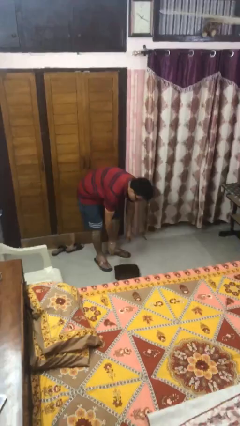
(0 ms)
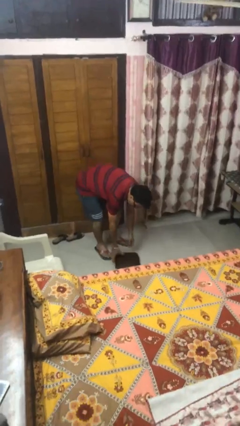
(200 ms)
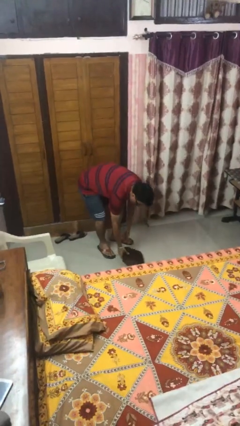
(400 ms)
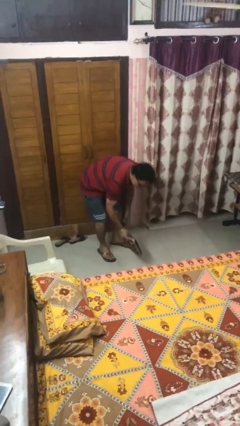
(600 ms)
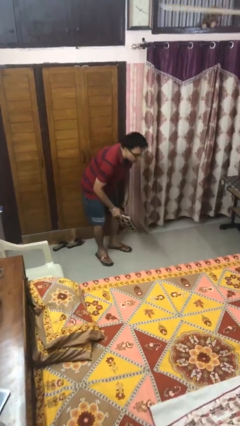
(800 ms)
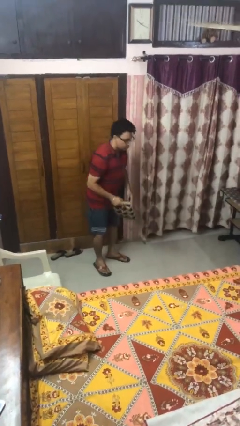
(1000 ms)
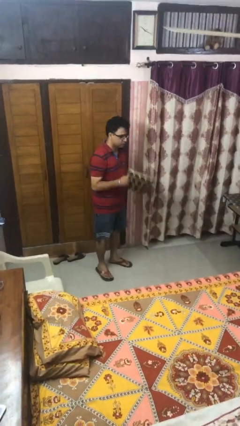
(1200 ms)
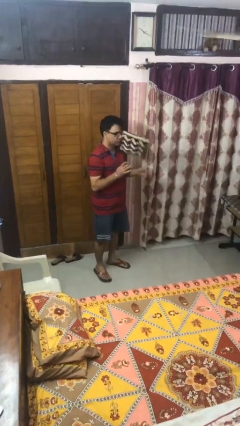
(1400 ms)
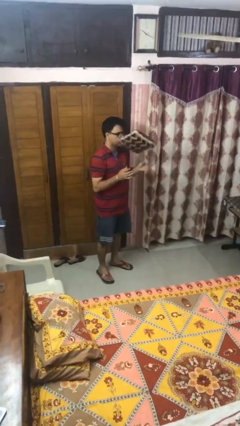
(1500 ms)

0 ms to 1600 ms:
person picks up object from floor

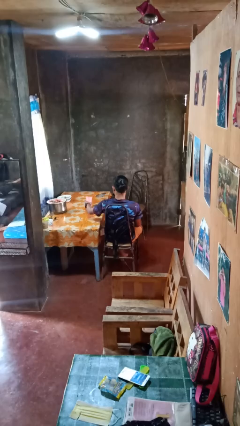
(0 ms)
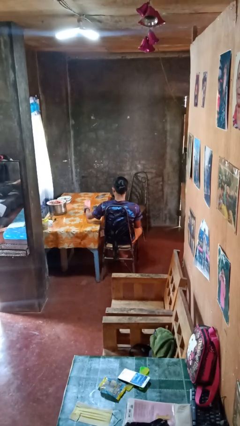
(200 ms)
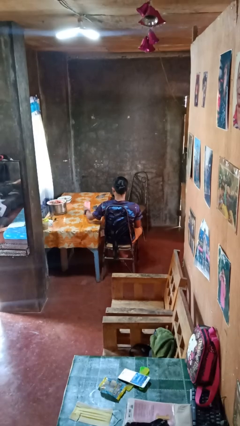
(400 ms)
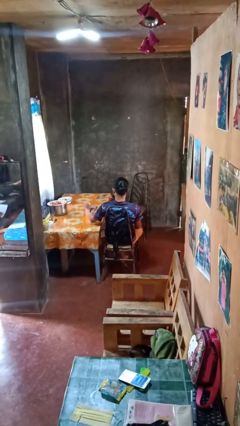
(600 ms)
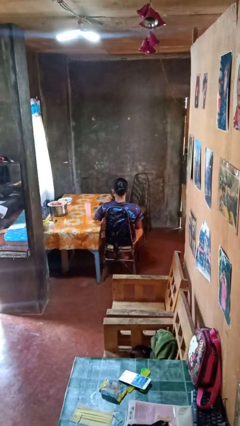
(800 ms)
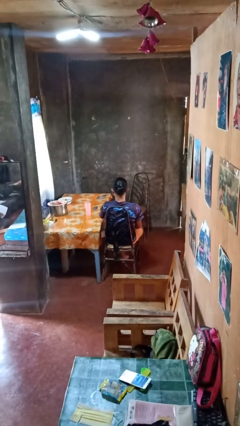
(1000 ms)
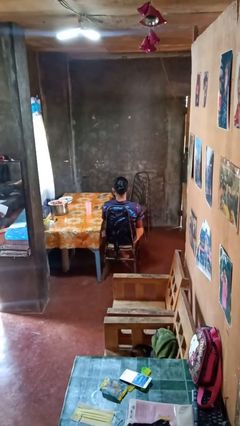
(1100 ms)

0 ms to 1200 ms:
person sets upright glass

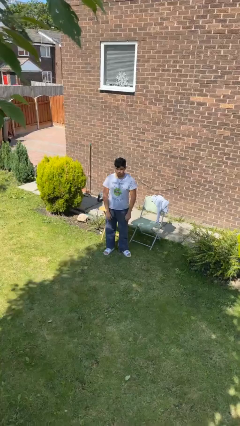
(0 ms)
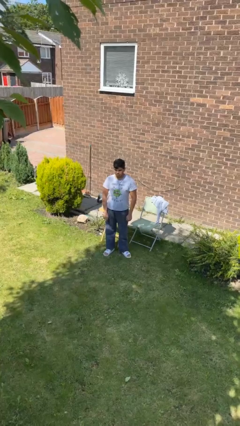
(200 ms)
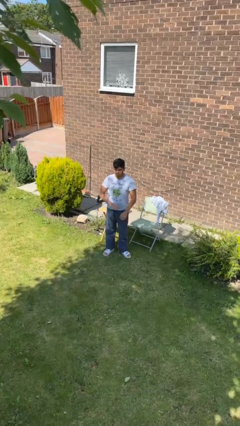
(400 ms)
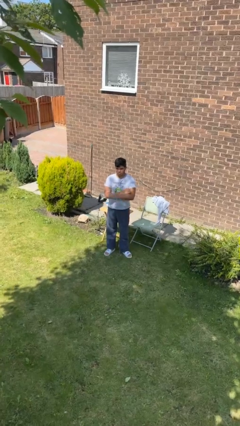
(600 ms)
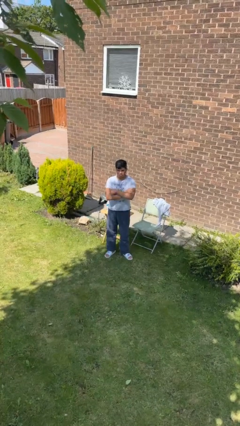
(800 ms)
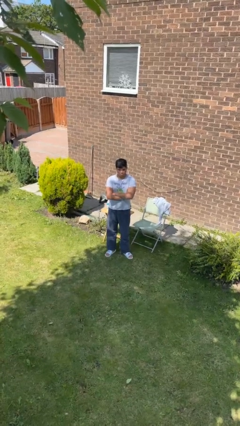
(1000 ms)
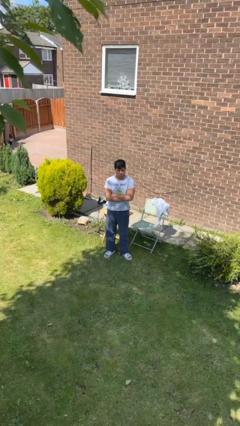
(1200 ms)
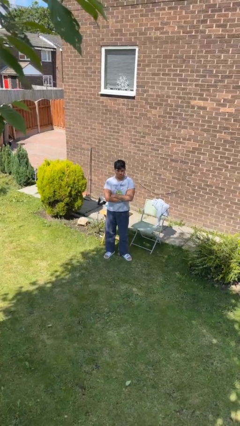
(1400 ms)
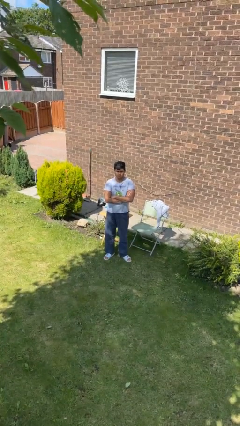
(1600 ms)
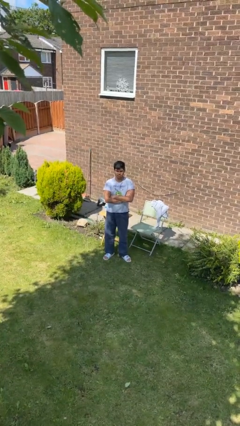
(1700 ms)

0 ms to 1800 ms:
person crosses arms

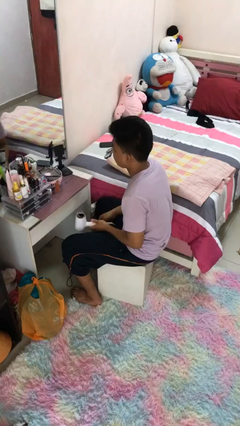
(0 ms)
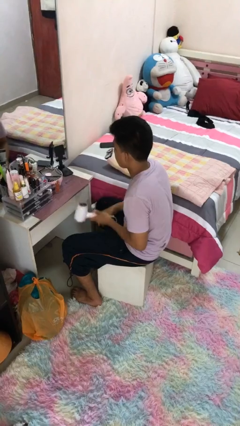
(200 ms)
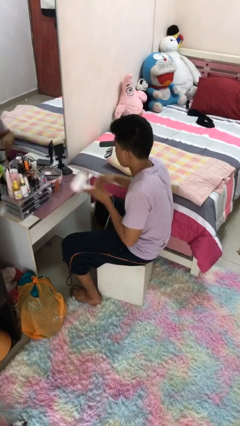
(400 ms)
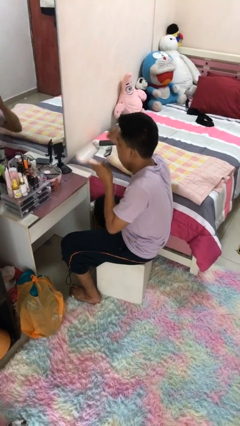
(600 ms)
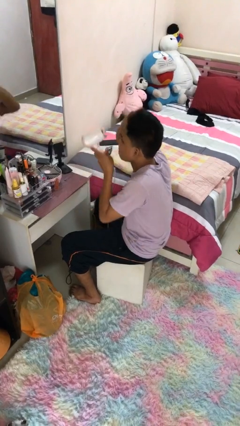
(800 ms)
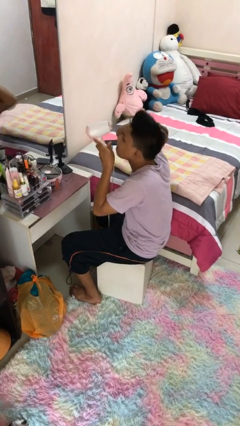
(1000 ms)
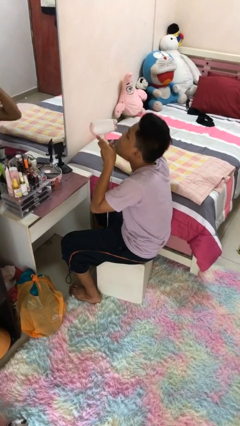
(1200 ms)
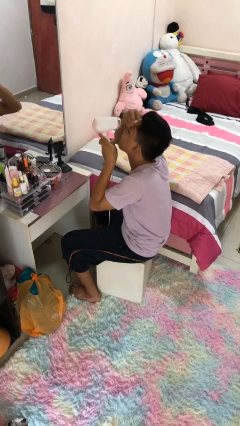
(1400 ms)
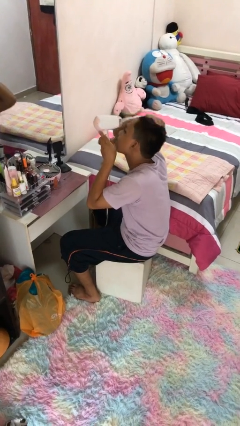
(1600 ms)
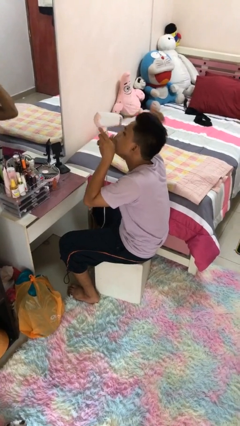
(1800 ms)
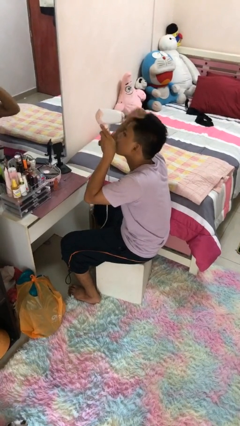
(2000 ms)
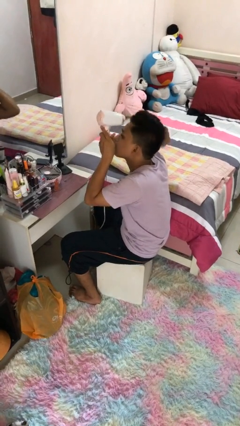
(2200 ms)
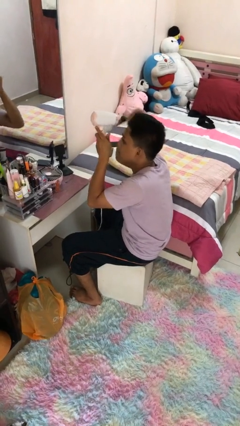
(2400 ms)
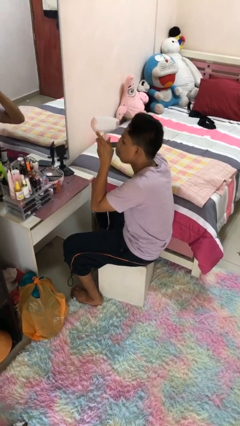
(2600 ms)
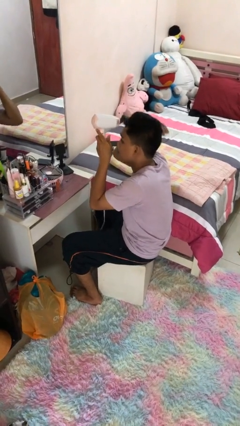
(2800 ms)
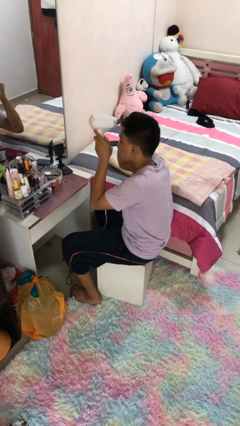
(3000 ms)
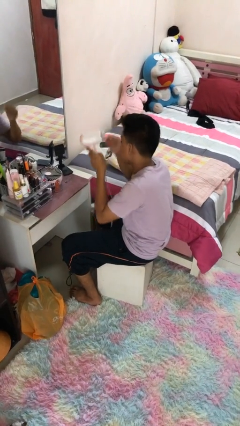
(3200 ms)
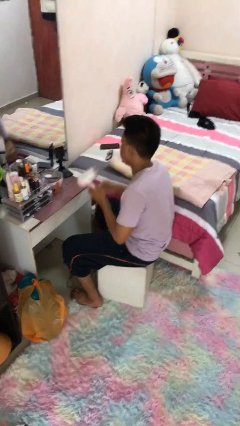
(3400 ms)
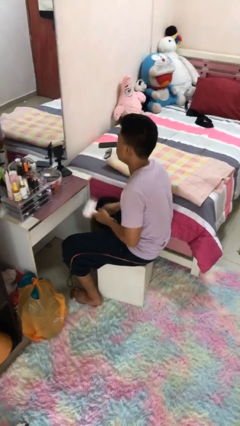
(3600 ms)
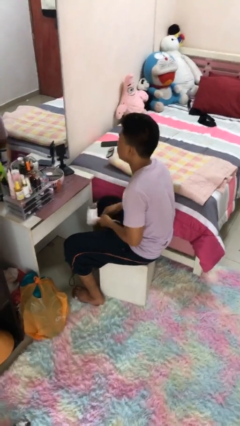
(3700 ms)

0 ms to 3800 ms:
person dries hair with hairdryer

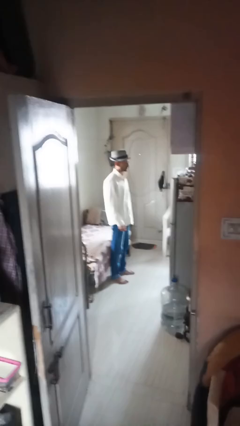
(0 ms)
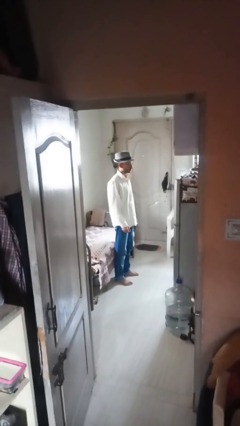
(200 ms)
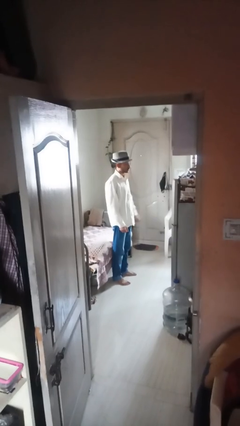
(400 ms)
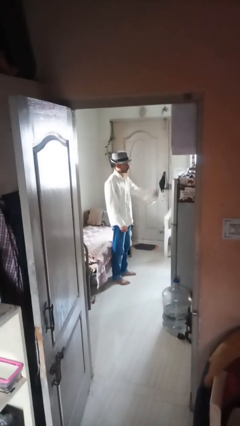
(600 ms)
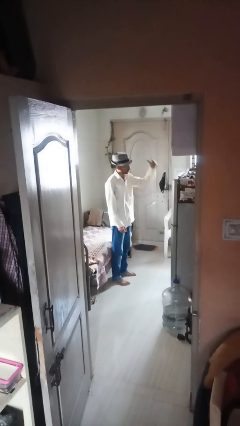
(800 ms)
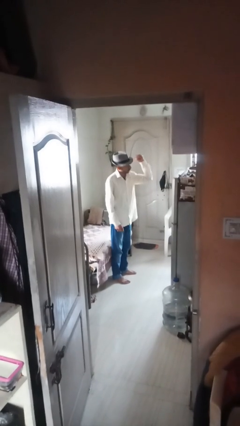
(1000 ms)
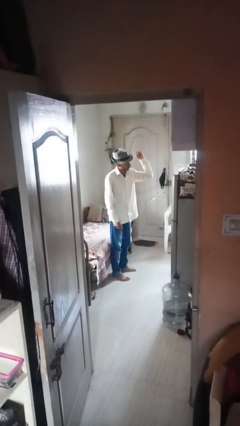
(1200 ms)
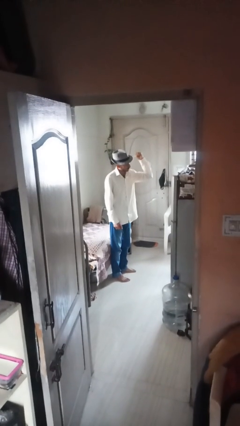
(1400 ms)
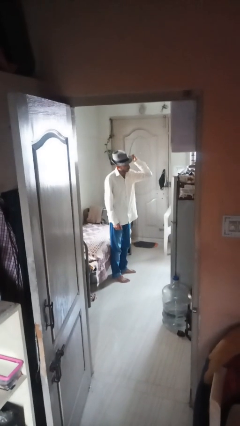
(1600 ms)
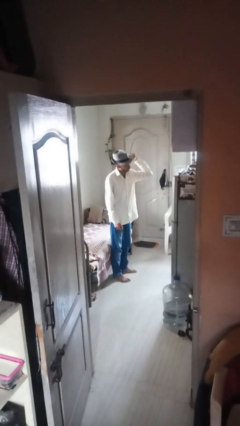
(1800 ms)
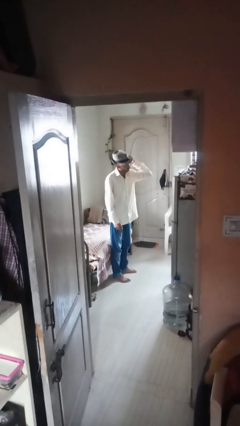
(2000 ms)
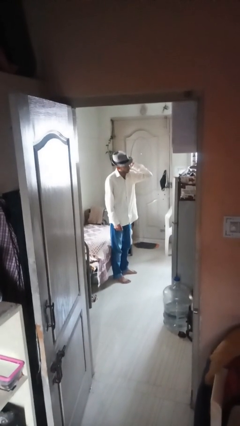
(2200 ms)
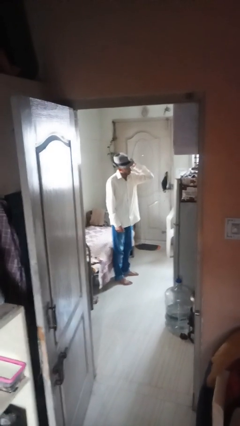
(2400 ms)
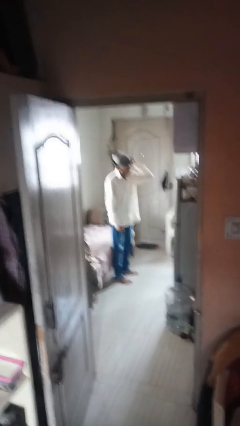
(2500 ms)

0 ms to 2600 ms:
person gestures behind me

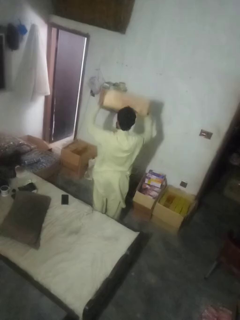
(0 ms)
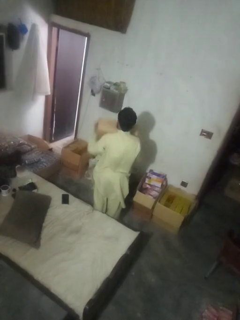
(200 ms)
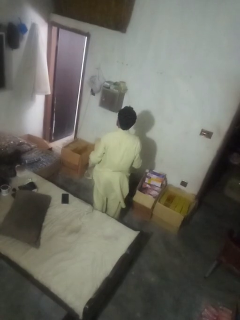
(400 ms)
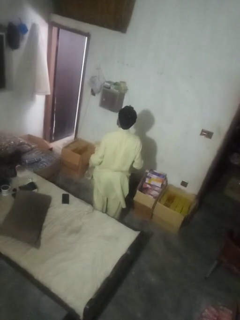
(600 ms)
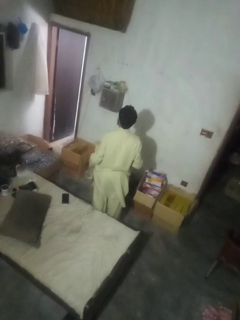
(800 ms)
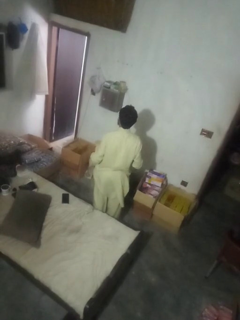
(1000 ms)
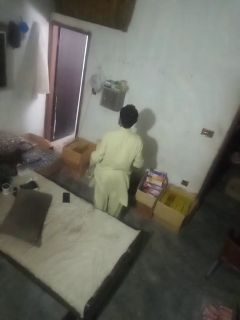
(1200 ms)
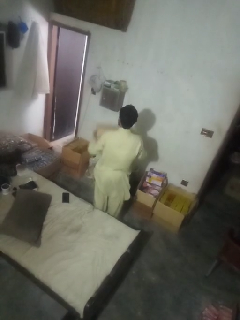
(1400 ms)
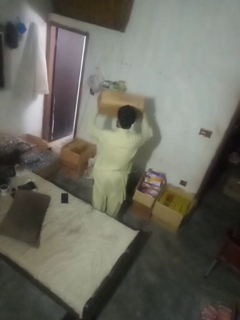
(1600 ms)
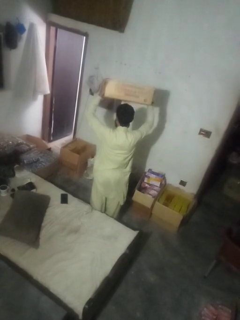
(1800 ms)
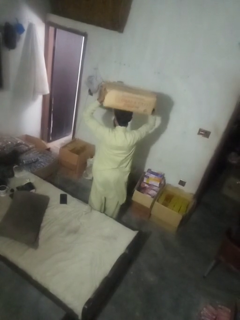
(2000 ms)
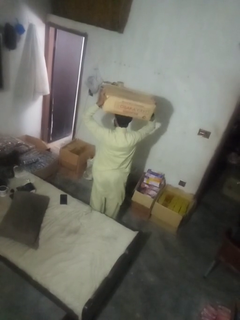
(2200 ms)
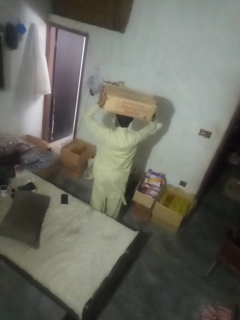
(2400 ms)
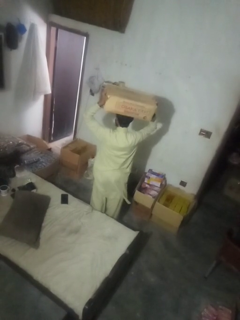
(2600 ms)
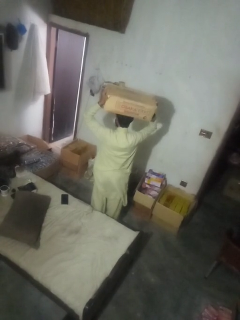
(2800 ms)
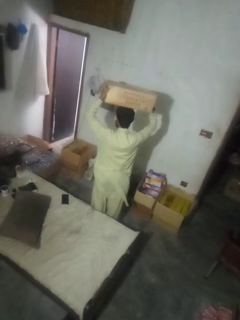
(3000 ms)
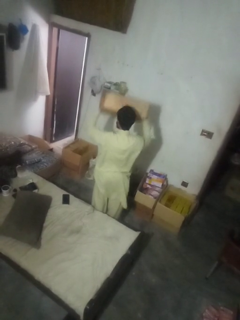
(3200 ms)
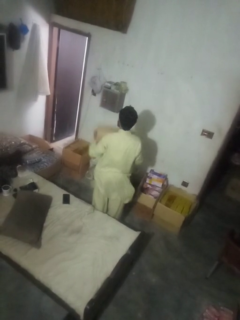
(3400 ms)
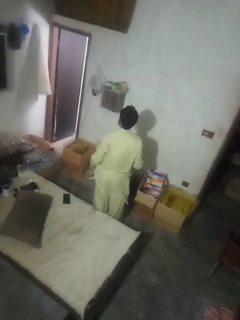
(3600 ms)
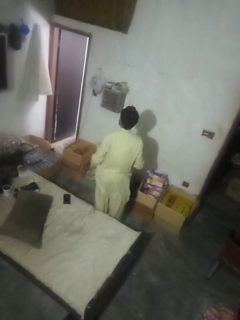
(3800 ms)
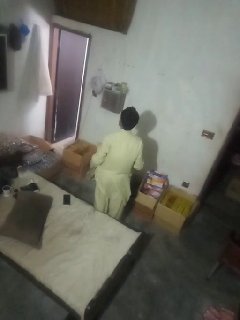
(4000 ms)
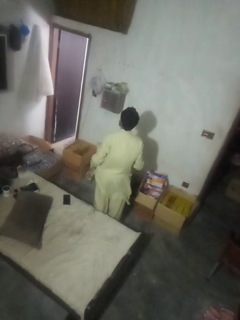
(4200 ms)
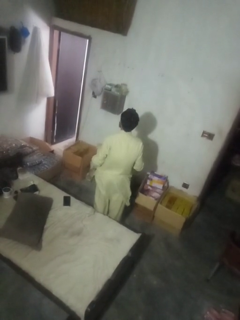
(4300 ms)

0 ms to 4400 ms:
person holds object above head

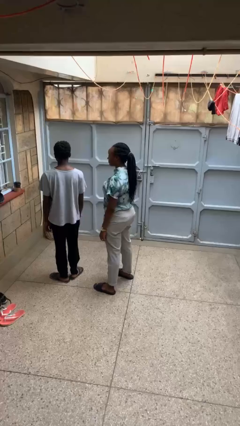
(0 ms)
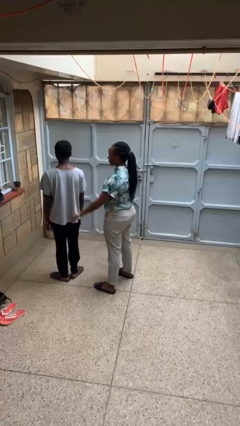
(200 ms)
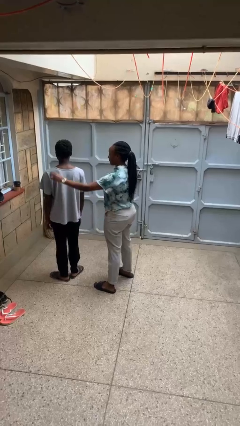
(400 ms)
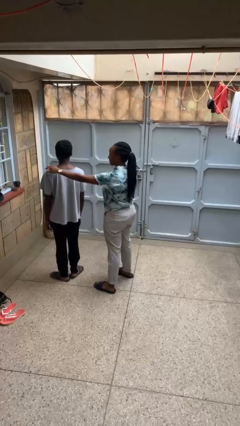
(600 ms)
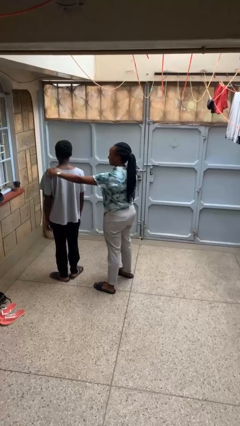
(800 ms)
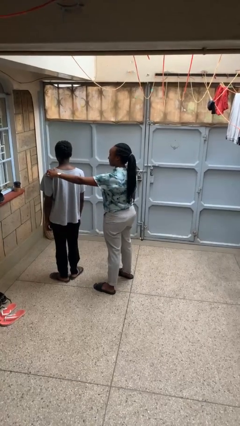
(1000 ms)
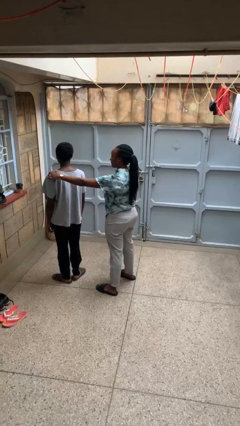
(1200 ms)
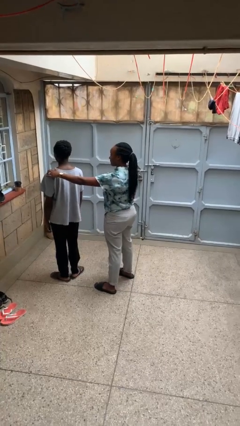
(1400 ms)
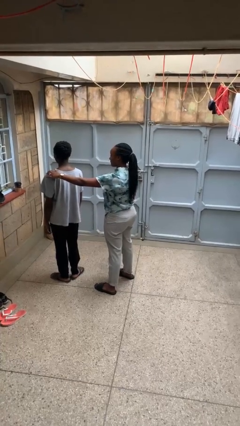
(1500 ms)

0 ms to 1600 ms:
person grabs person by shoulder

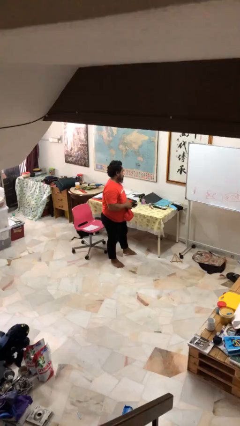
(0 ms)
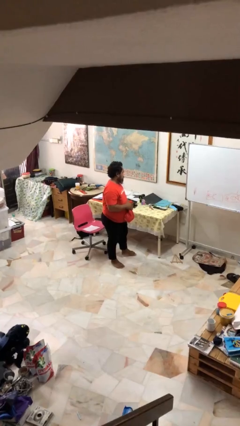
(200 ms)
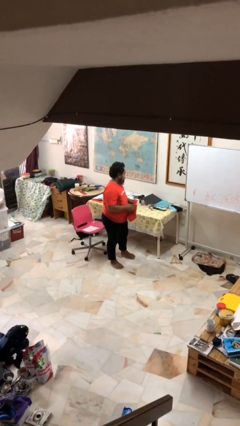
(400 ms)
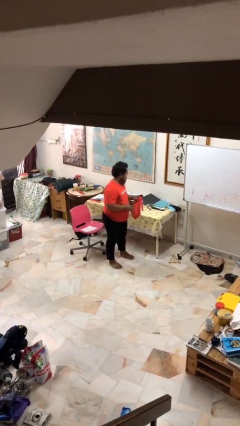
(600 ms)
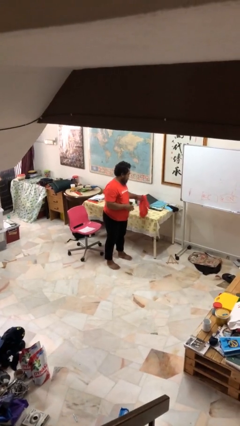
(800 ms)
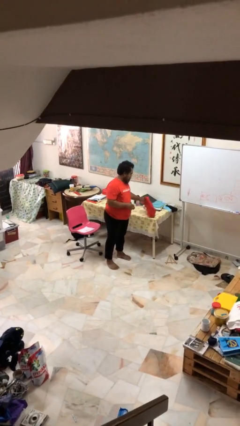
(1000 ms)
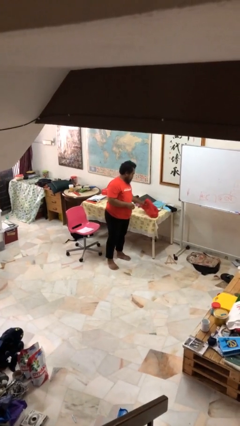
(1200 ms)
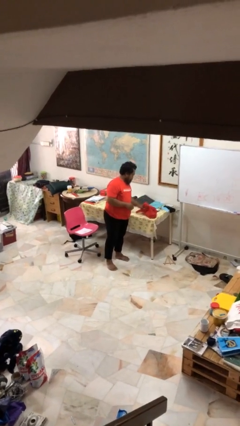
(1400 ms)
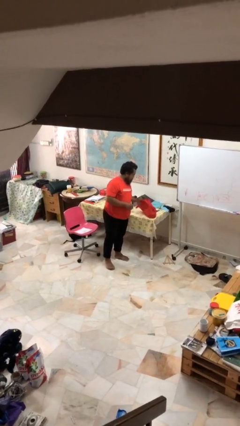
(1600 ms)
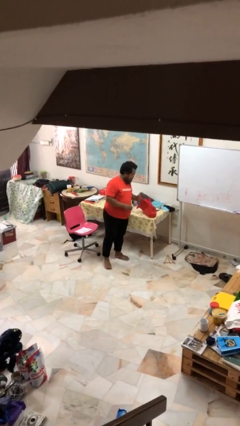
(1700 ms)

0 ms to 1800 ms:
person puts down object on table
